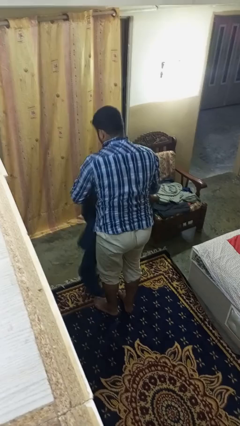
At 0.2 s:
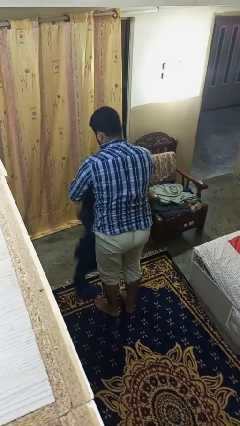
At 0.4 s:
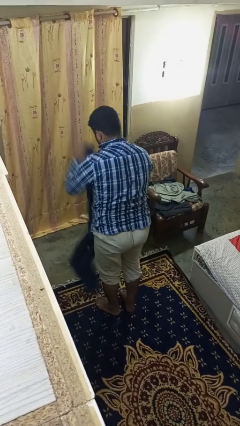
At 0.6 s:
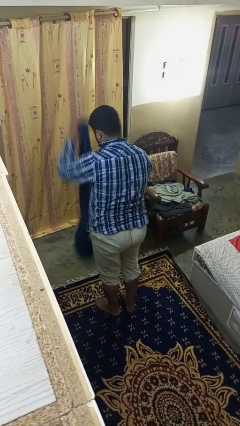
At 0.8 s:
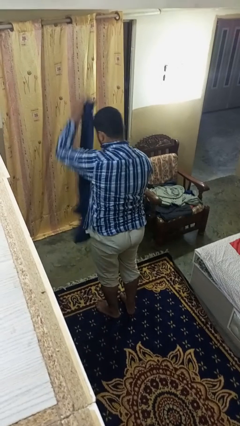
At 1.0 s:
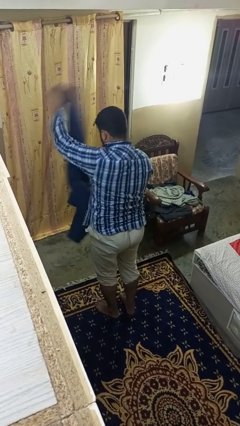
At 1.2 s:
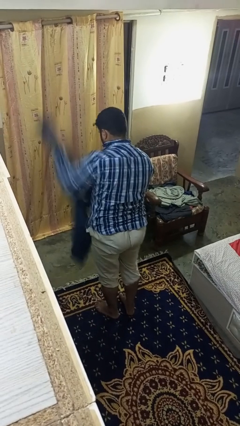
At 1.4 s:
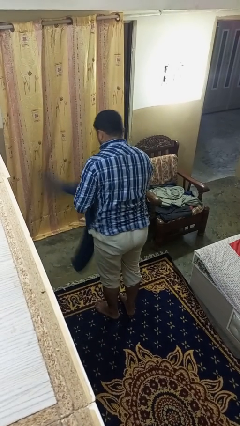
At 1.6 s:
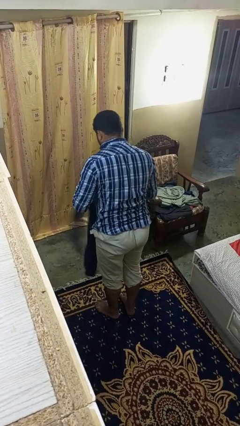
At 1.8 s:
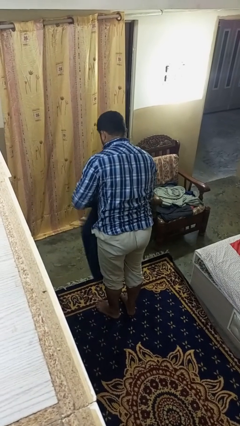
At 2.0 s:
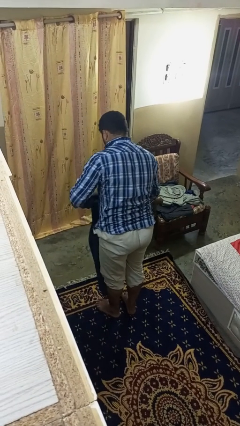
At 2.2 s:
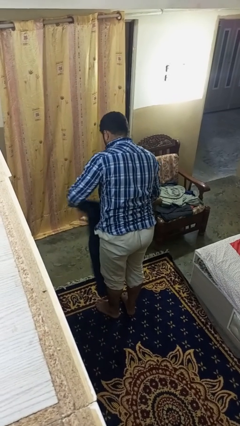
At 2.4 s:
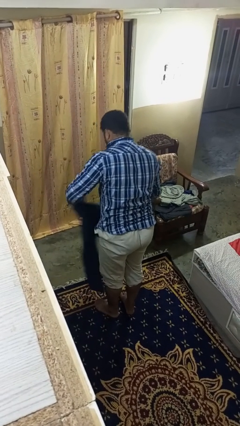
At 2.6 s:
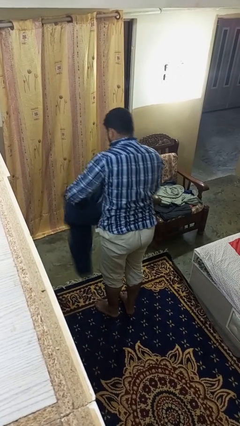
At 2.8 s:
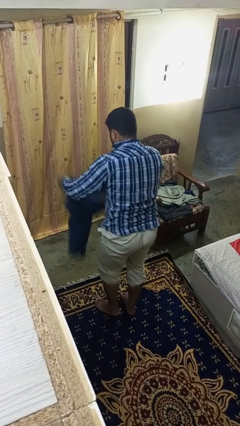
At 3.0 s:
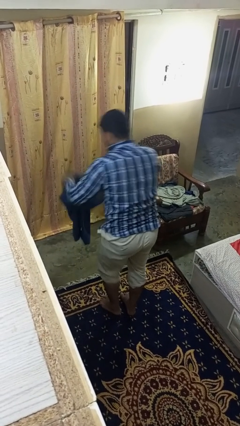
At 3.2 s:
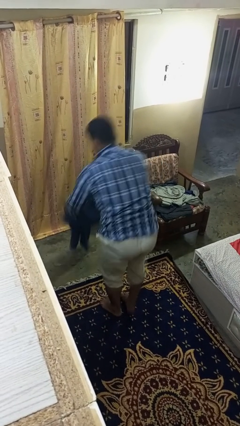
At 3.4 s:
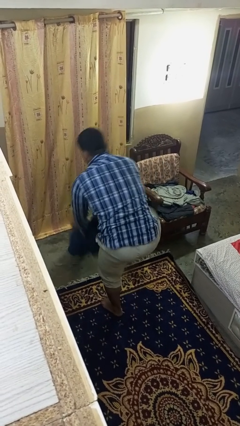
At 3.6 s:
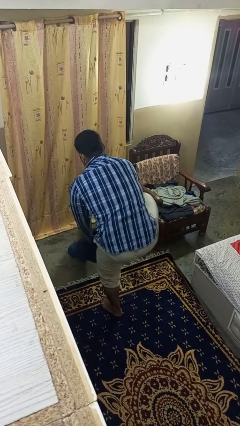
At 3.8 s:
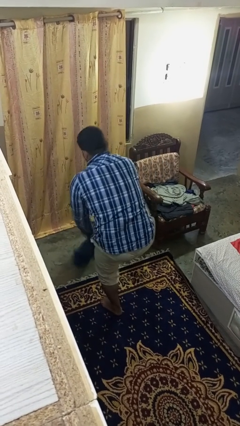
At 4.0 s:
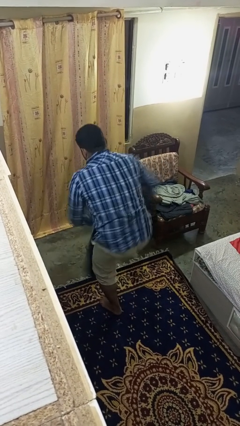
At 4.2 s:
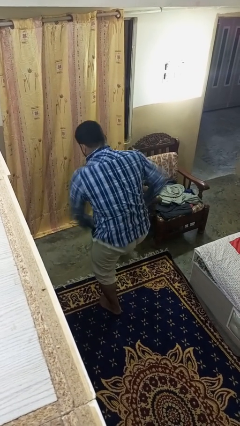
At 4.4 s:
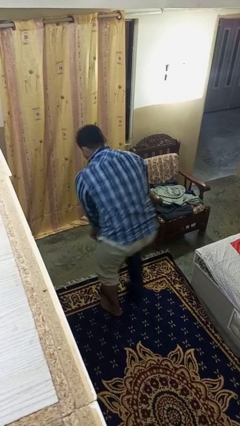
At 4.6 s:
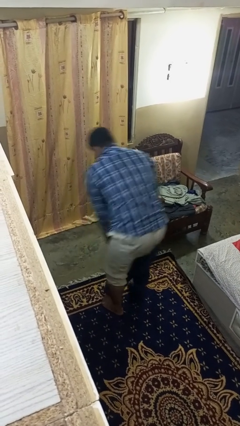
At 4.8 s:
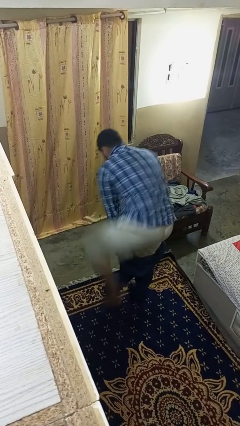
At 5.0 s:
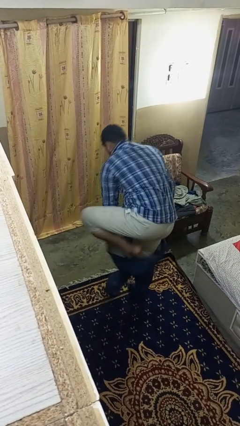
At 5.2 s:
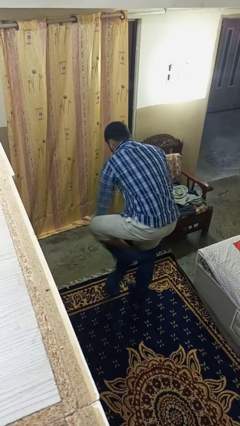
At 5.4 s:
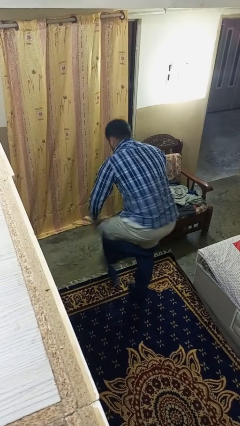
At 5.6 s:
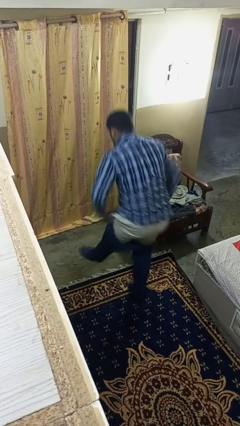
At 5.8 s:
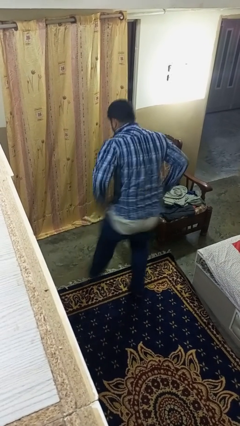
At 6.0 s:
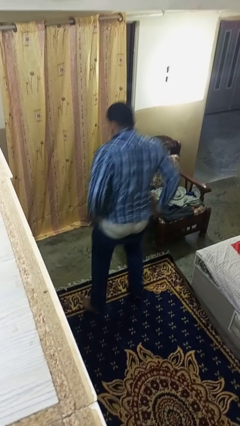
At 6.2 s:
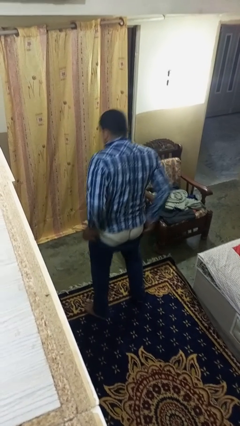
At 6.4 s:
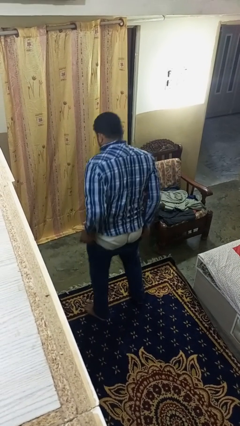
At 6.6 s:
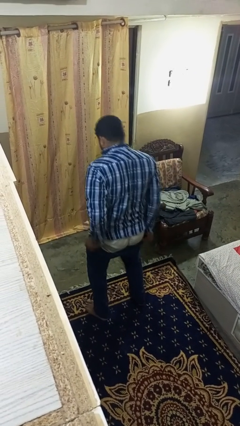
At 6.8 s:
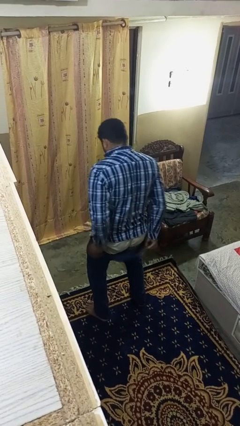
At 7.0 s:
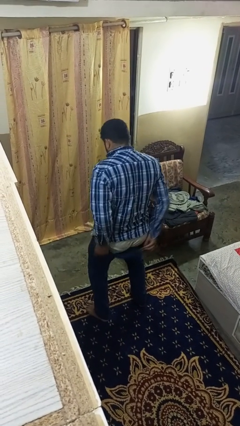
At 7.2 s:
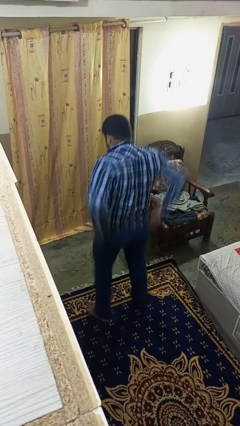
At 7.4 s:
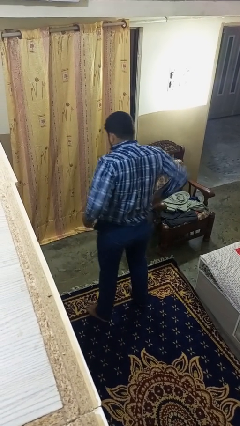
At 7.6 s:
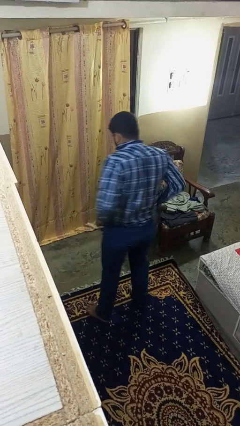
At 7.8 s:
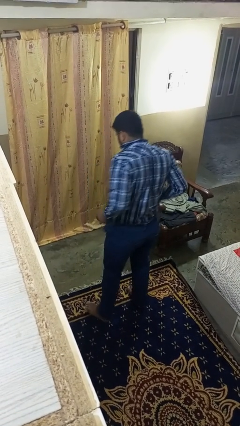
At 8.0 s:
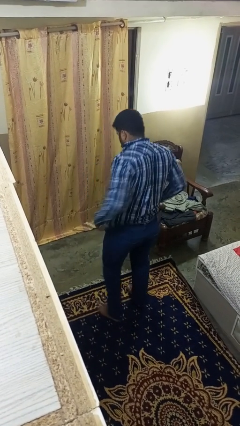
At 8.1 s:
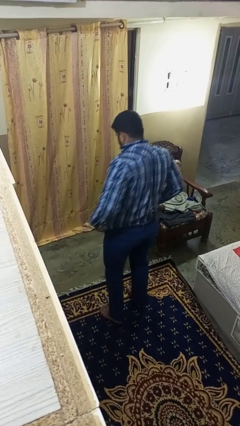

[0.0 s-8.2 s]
person puts on pants

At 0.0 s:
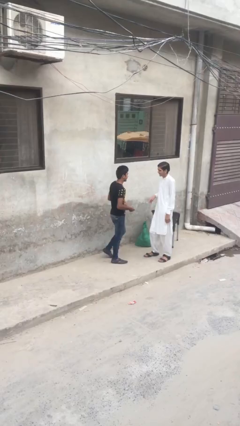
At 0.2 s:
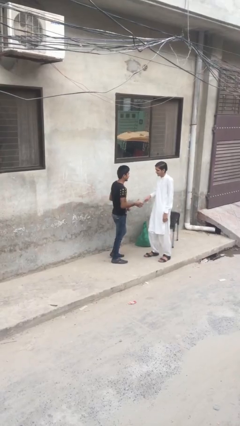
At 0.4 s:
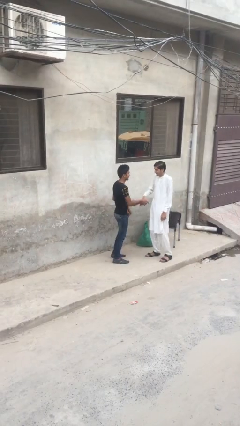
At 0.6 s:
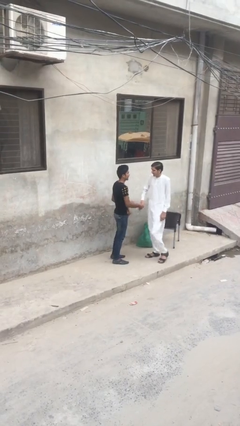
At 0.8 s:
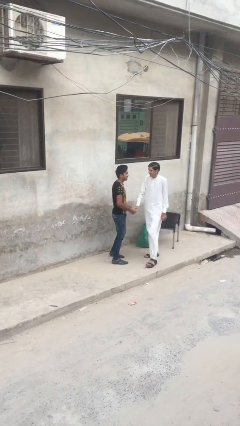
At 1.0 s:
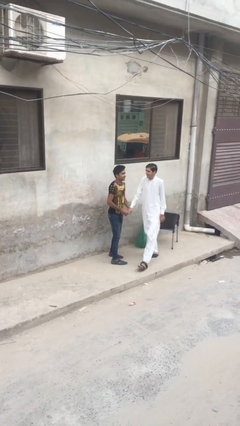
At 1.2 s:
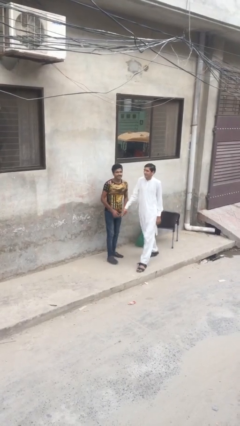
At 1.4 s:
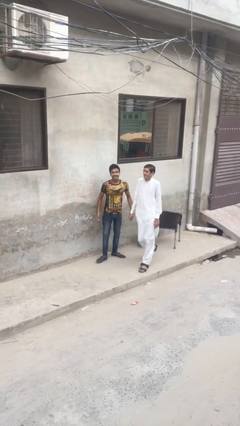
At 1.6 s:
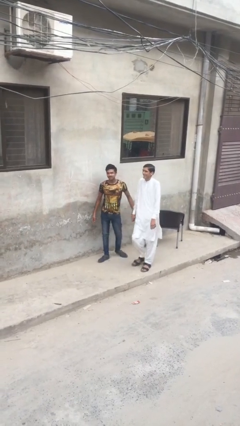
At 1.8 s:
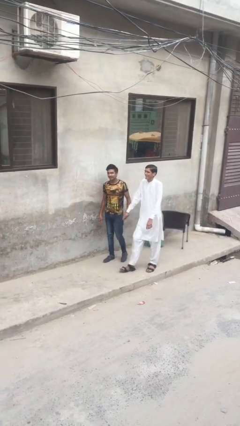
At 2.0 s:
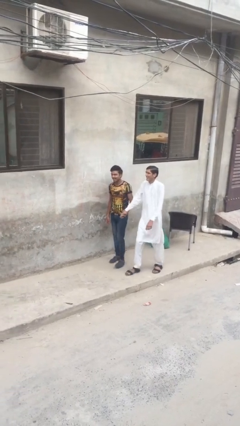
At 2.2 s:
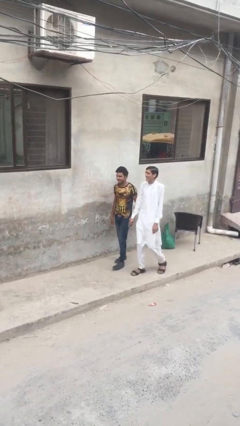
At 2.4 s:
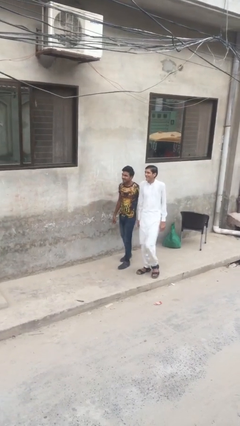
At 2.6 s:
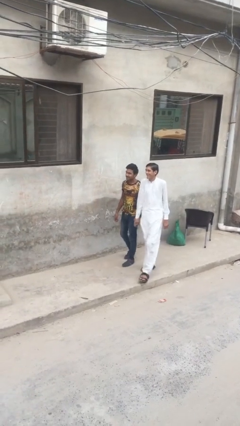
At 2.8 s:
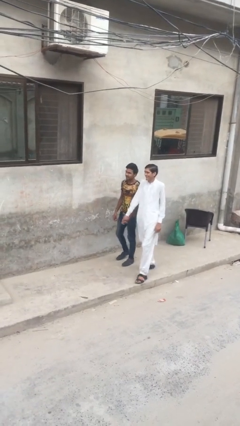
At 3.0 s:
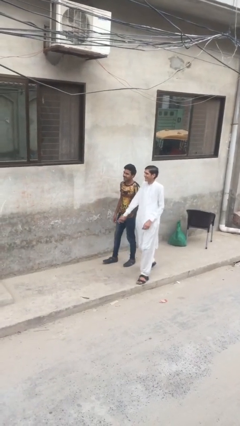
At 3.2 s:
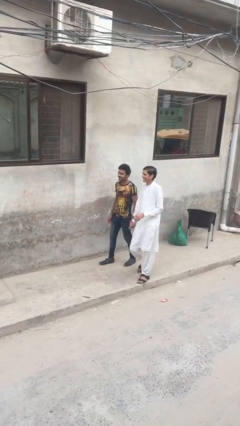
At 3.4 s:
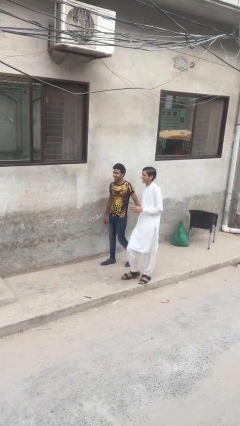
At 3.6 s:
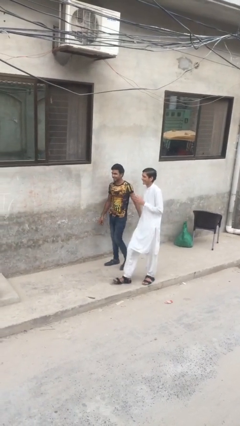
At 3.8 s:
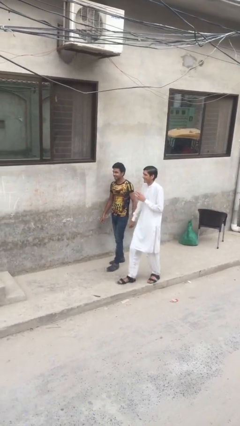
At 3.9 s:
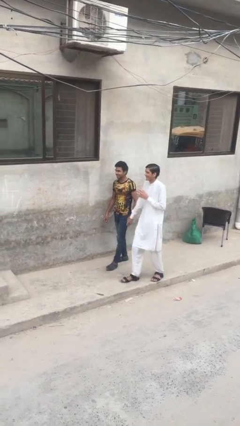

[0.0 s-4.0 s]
person holds hand

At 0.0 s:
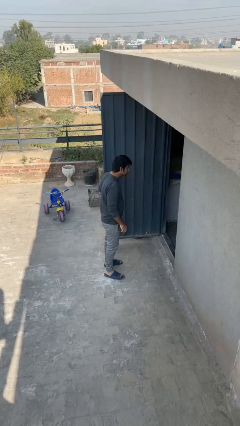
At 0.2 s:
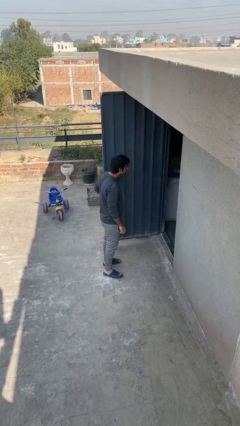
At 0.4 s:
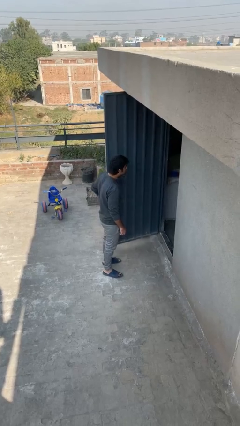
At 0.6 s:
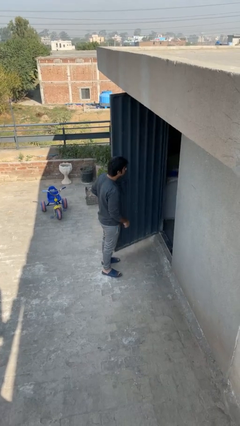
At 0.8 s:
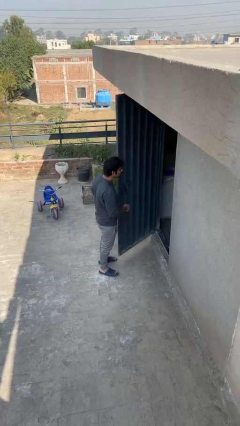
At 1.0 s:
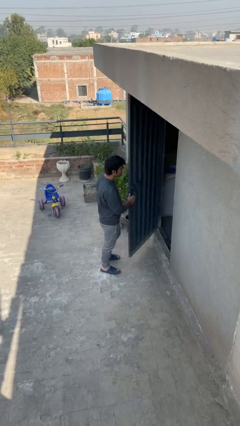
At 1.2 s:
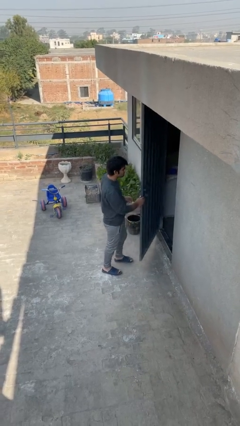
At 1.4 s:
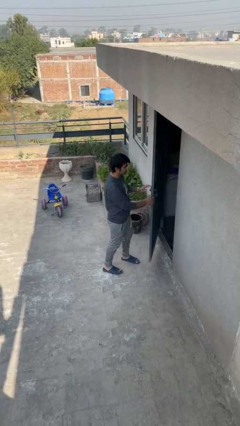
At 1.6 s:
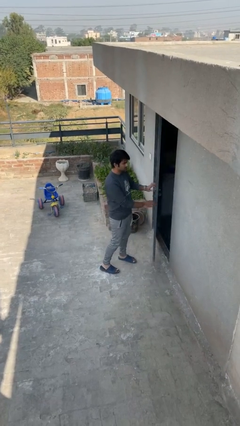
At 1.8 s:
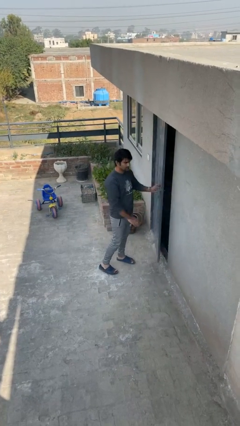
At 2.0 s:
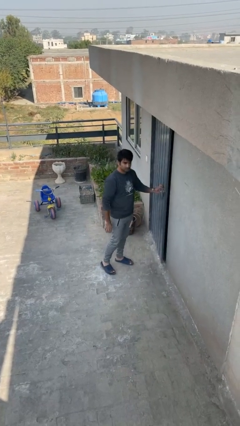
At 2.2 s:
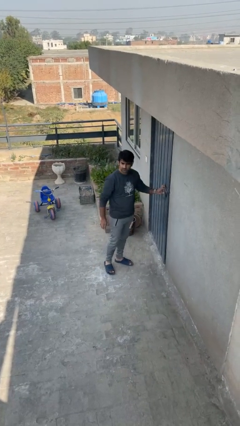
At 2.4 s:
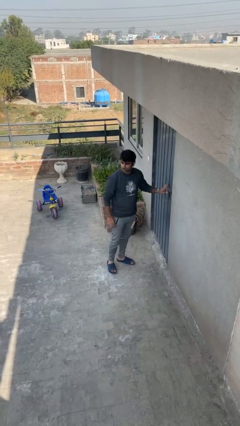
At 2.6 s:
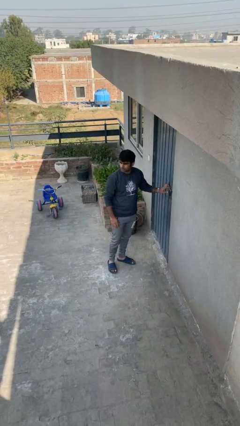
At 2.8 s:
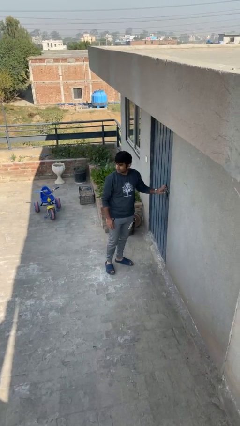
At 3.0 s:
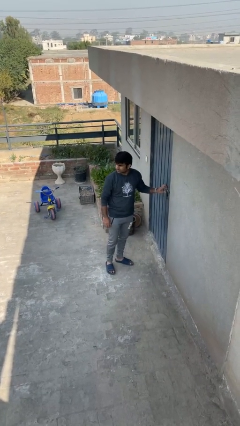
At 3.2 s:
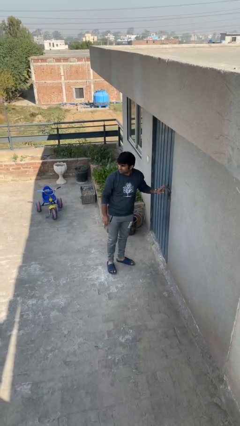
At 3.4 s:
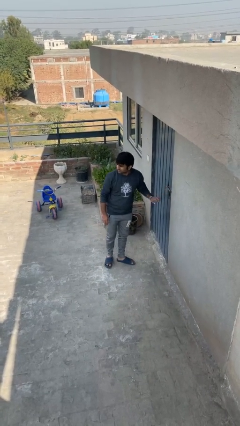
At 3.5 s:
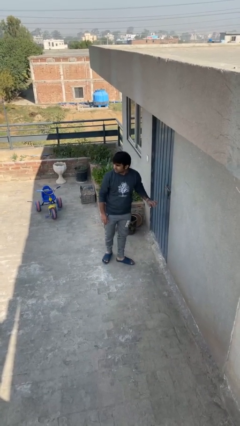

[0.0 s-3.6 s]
person closes facility door

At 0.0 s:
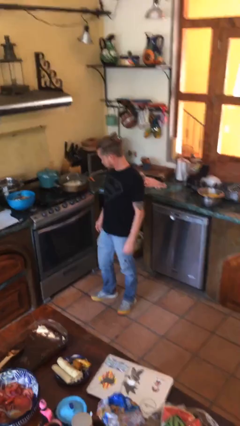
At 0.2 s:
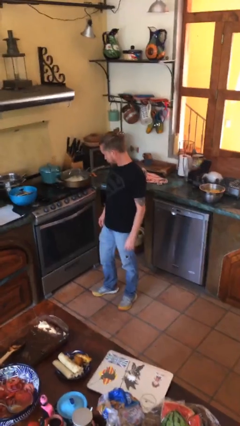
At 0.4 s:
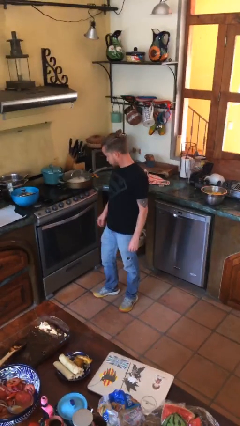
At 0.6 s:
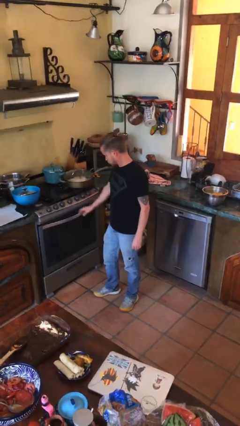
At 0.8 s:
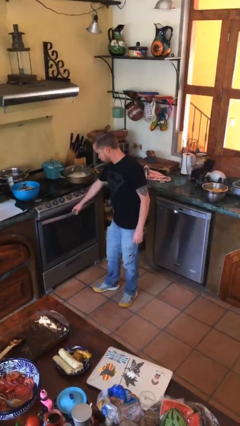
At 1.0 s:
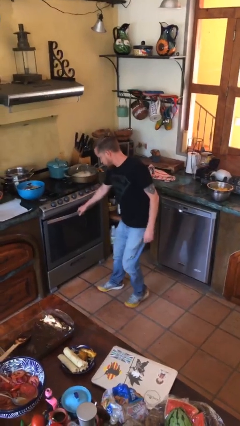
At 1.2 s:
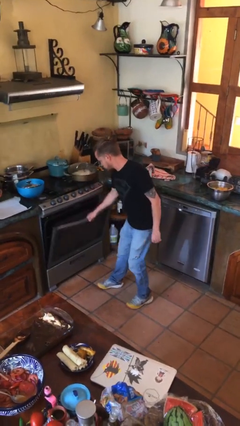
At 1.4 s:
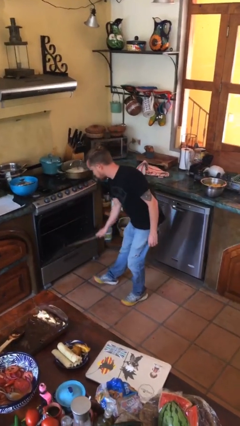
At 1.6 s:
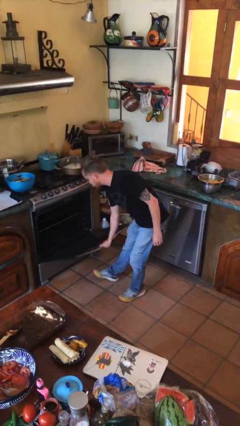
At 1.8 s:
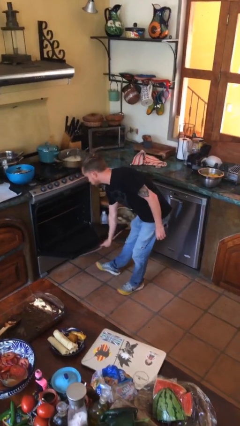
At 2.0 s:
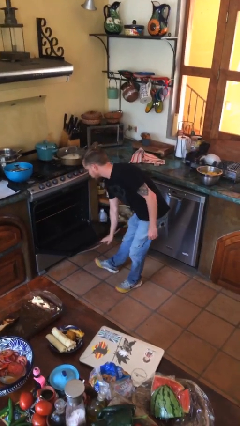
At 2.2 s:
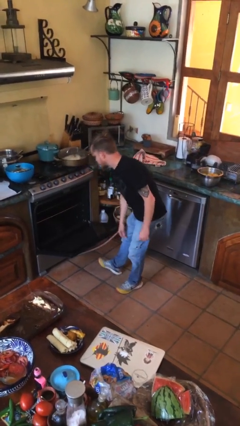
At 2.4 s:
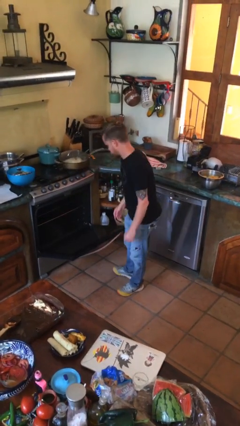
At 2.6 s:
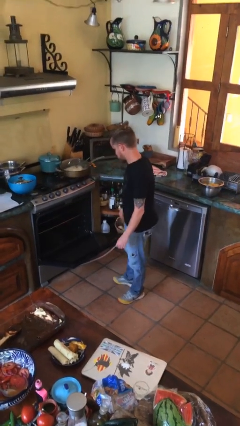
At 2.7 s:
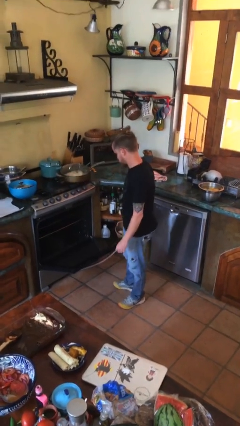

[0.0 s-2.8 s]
person opens oven door
